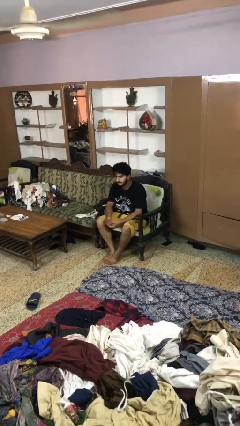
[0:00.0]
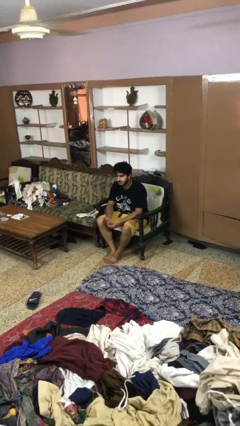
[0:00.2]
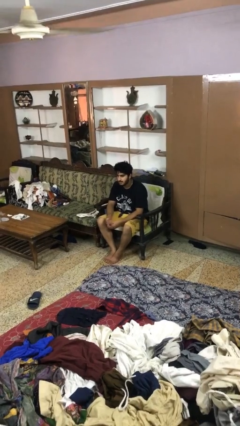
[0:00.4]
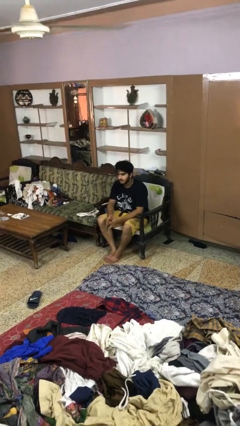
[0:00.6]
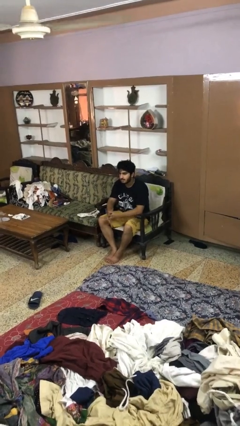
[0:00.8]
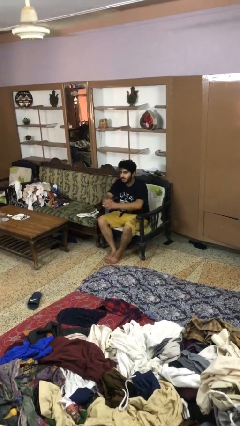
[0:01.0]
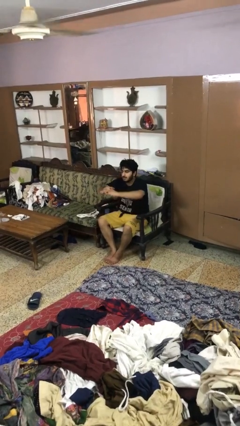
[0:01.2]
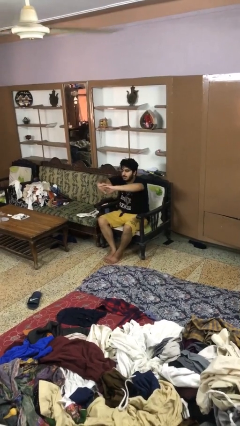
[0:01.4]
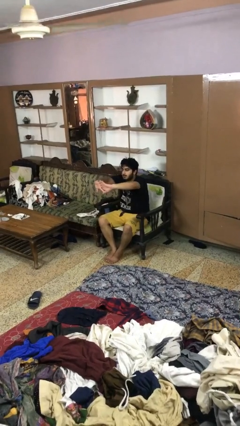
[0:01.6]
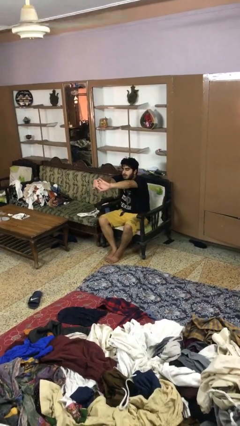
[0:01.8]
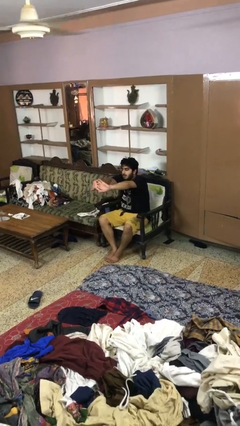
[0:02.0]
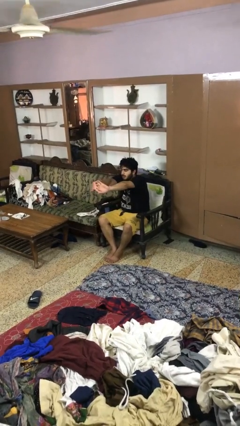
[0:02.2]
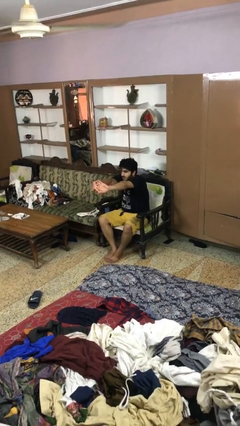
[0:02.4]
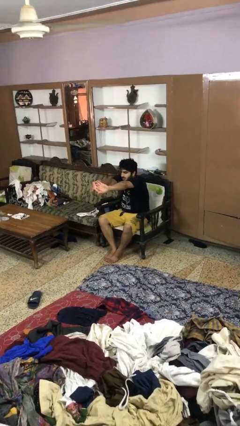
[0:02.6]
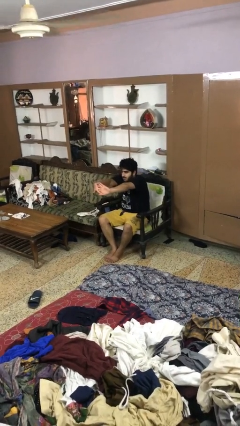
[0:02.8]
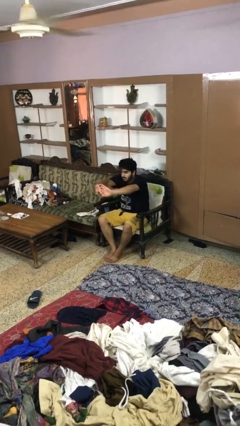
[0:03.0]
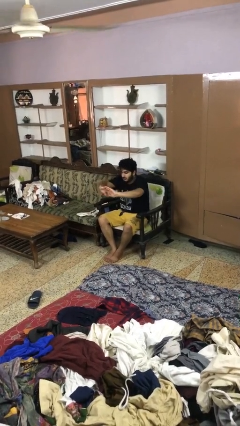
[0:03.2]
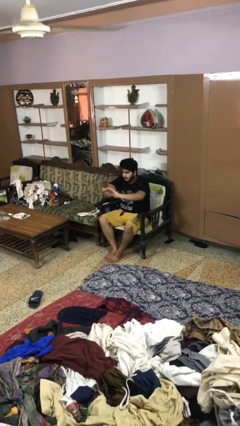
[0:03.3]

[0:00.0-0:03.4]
person cracks knuckles

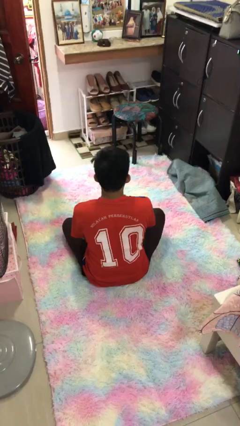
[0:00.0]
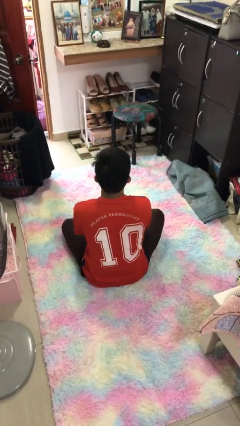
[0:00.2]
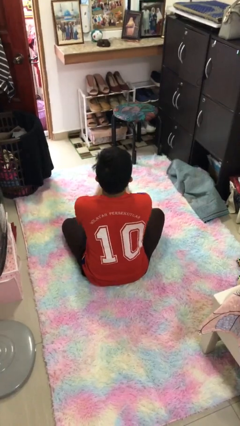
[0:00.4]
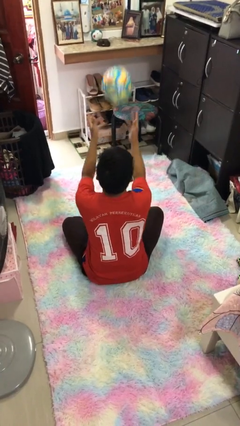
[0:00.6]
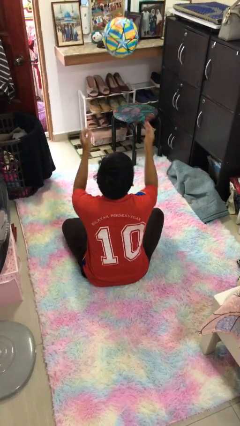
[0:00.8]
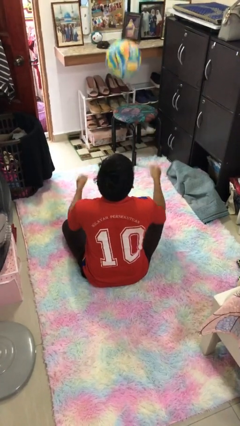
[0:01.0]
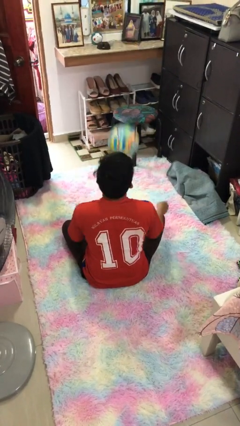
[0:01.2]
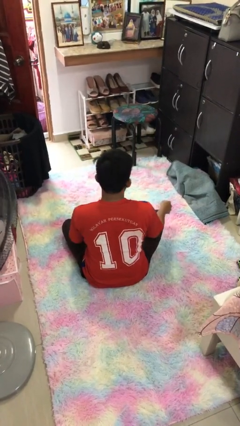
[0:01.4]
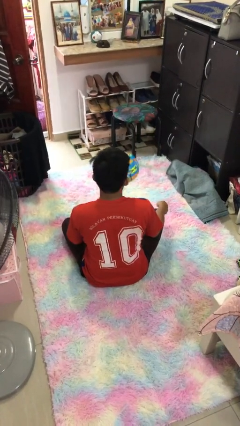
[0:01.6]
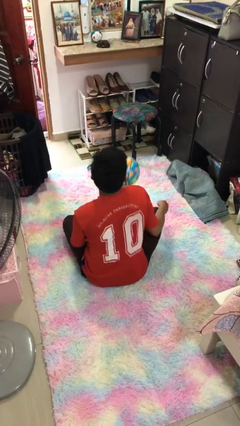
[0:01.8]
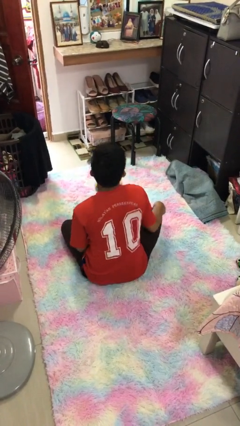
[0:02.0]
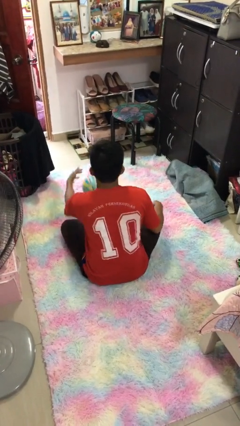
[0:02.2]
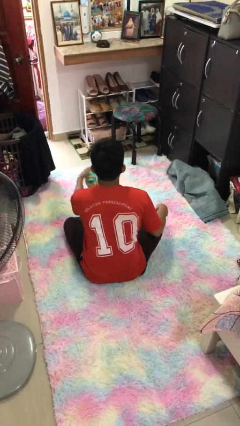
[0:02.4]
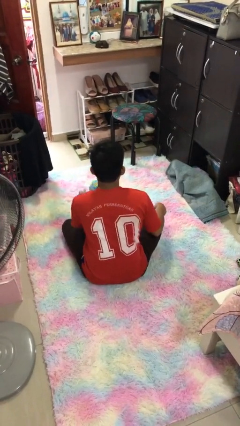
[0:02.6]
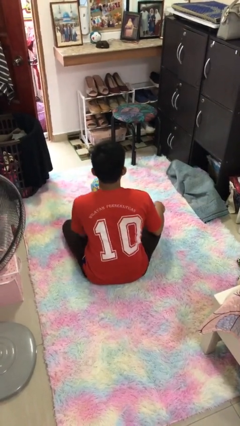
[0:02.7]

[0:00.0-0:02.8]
person bounces ball on floor

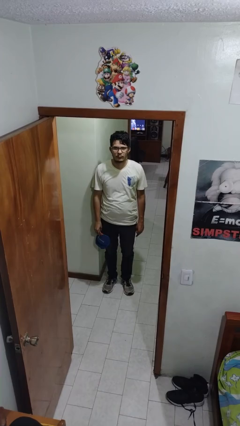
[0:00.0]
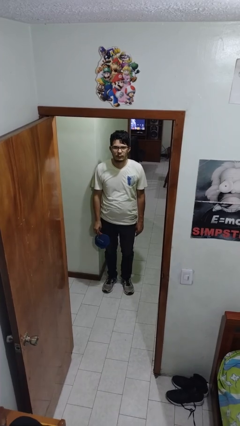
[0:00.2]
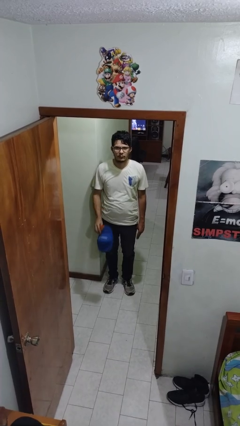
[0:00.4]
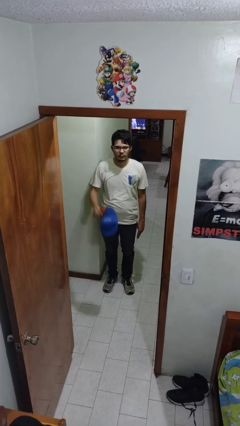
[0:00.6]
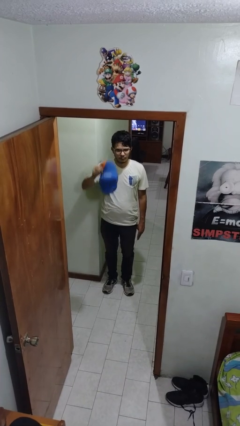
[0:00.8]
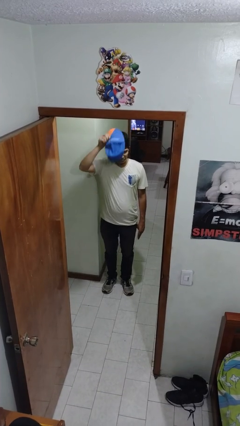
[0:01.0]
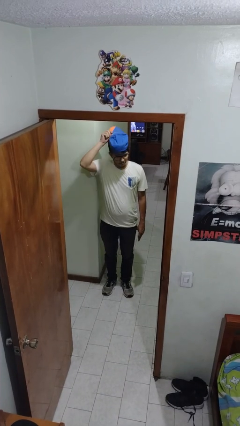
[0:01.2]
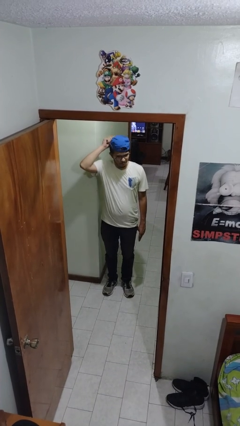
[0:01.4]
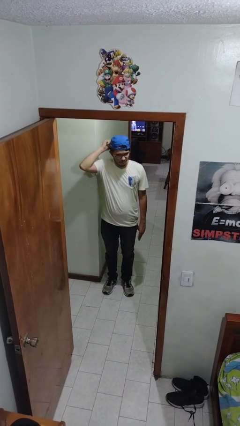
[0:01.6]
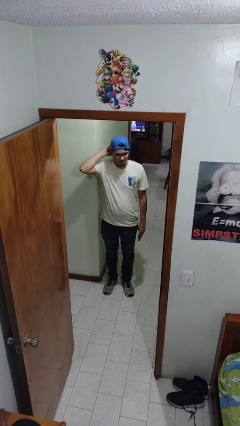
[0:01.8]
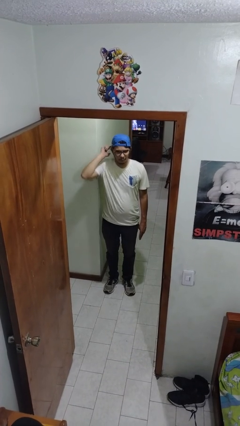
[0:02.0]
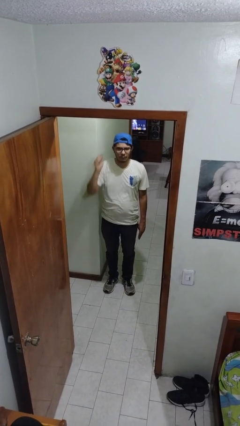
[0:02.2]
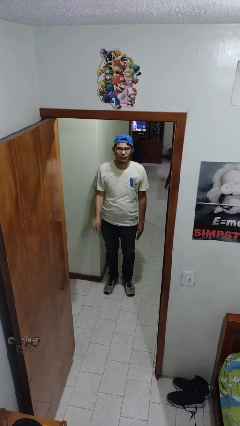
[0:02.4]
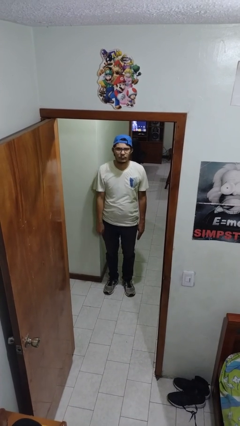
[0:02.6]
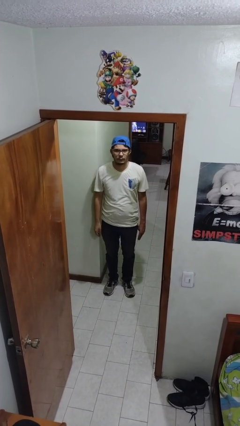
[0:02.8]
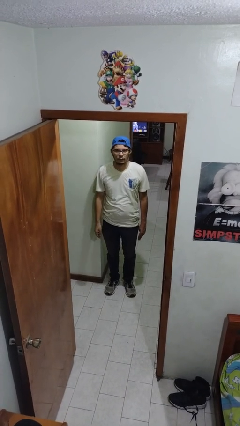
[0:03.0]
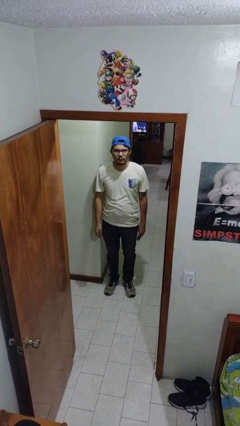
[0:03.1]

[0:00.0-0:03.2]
person puts on hat

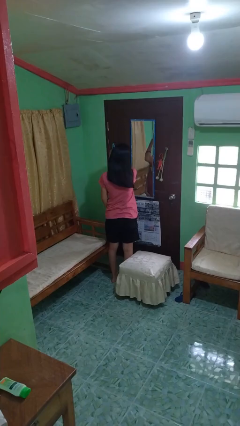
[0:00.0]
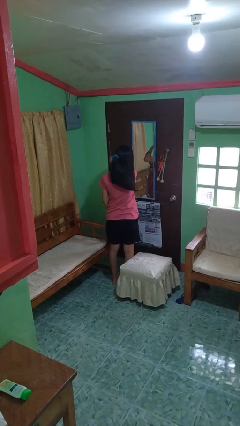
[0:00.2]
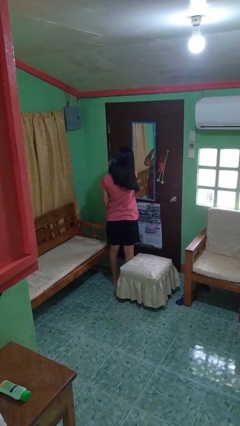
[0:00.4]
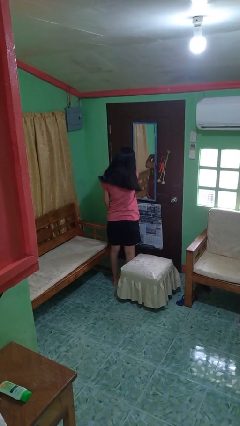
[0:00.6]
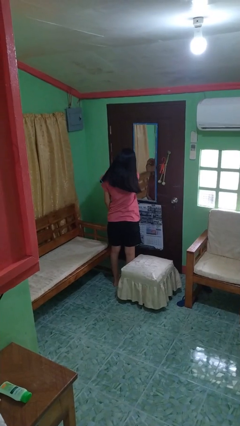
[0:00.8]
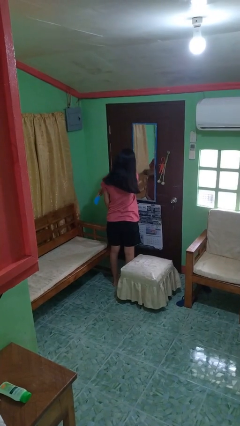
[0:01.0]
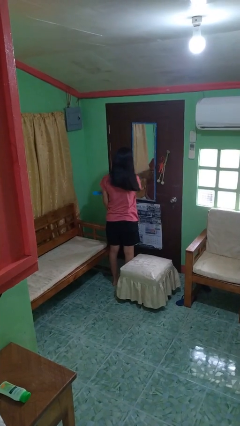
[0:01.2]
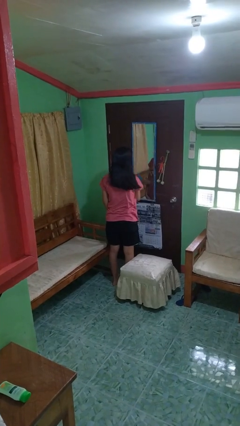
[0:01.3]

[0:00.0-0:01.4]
person brushes hair

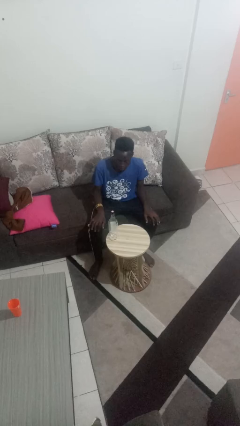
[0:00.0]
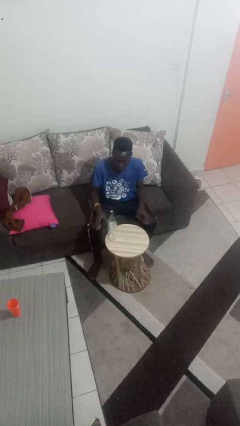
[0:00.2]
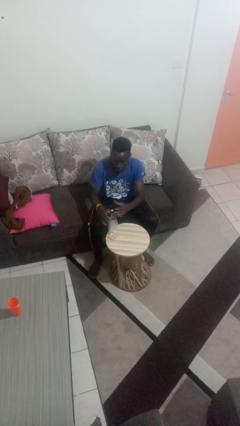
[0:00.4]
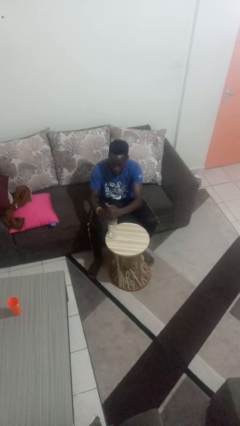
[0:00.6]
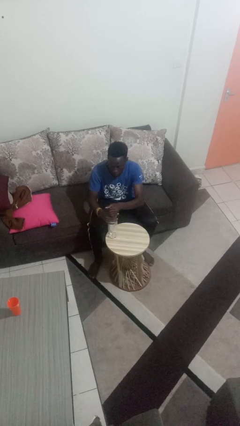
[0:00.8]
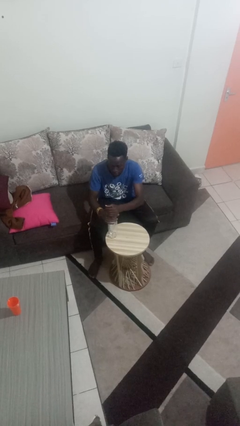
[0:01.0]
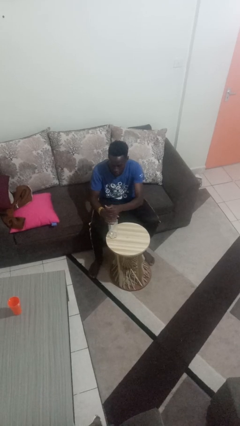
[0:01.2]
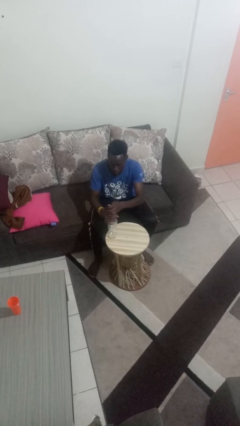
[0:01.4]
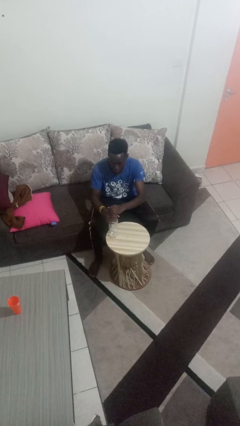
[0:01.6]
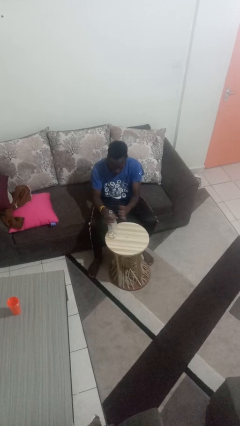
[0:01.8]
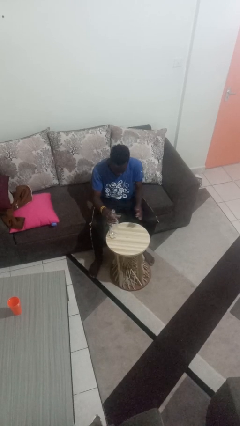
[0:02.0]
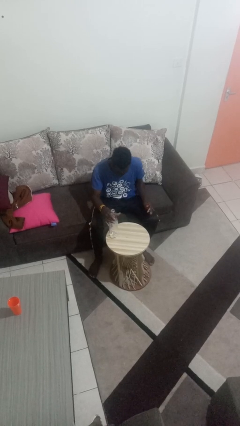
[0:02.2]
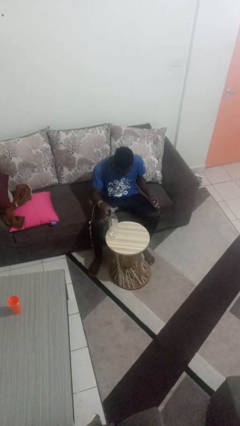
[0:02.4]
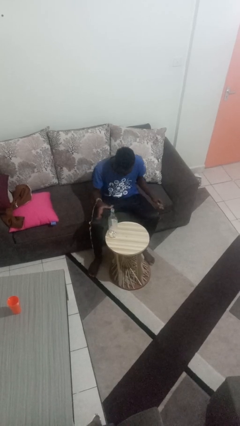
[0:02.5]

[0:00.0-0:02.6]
person unscrews lid from bottle

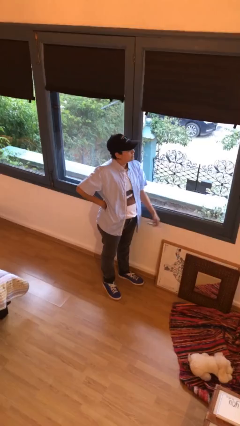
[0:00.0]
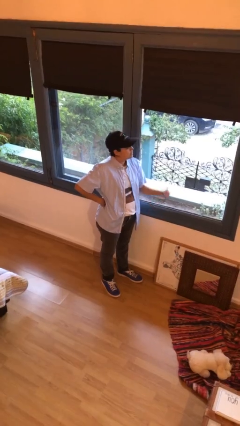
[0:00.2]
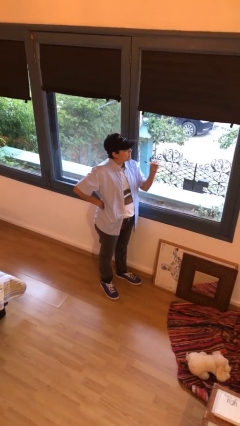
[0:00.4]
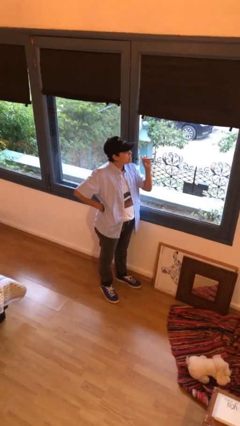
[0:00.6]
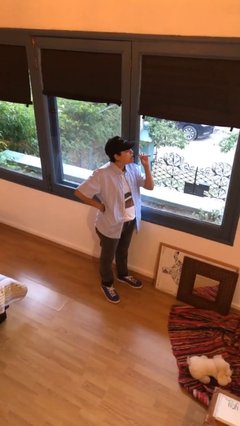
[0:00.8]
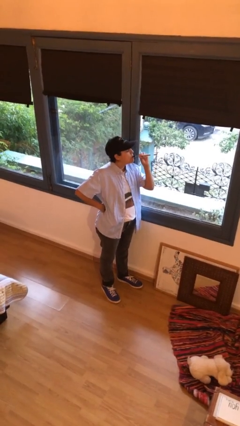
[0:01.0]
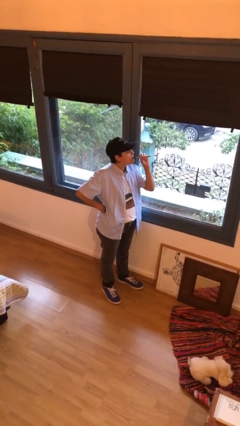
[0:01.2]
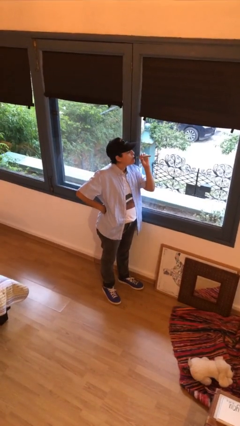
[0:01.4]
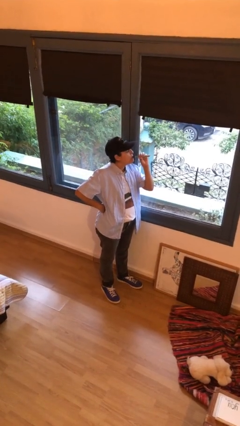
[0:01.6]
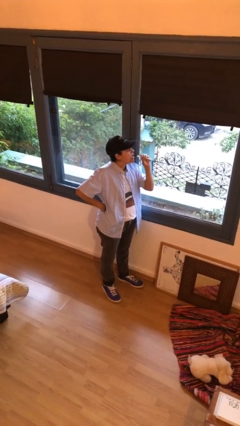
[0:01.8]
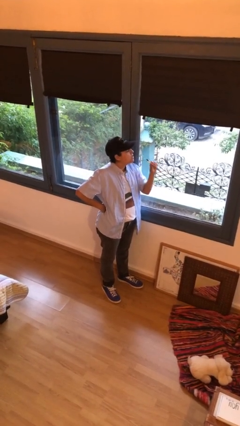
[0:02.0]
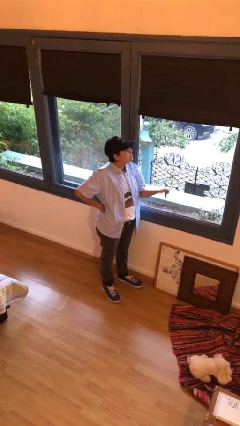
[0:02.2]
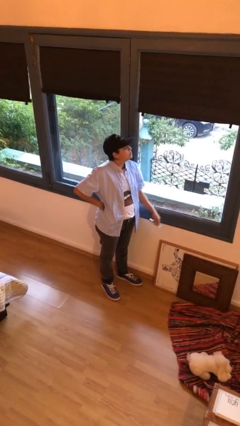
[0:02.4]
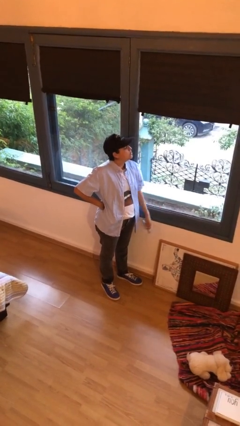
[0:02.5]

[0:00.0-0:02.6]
person vapes

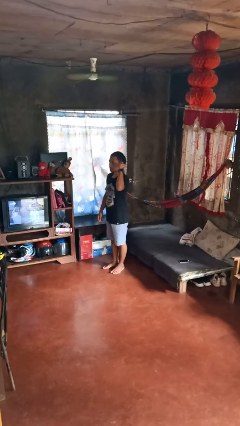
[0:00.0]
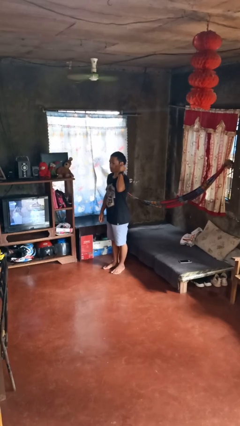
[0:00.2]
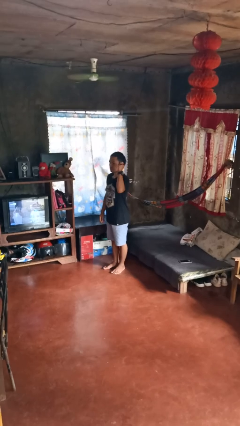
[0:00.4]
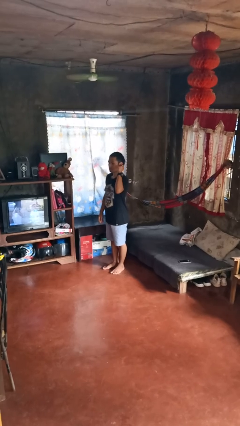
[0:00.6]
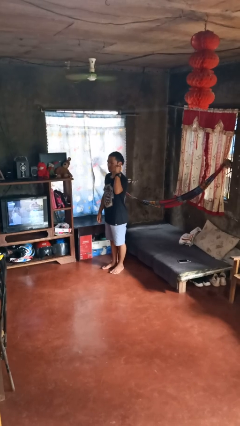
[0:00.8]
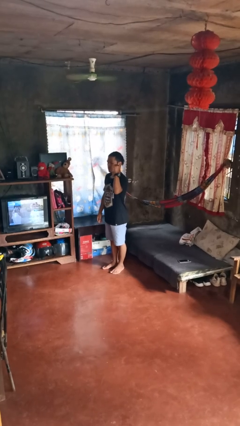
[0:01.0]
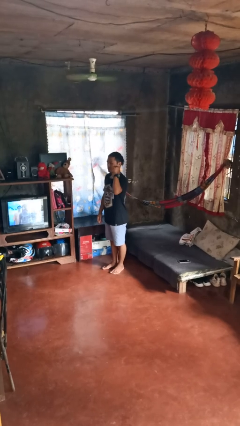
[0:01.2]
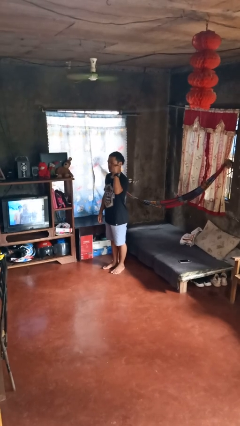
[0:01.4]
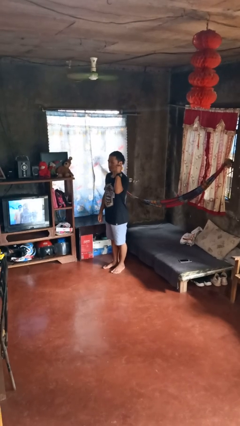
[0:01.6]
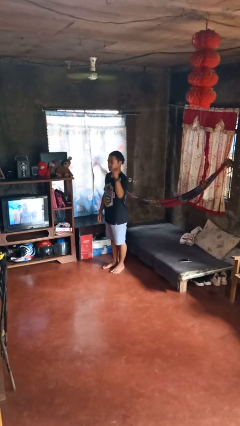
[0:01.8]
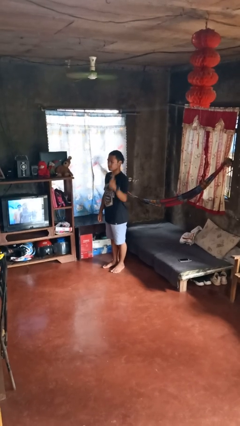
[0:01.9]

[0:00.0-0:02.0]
person gestures behind me
